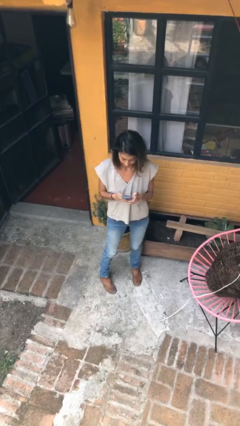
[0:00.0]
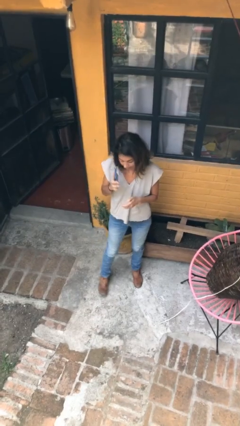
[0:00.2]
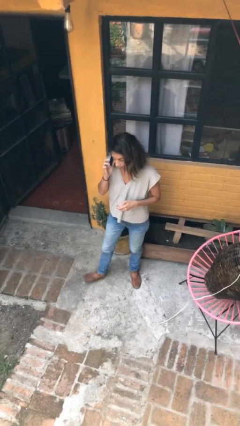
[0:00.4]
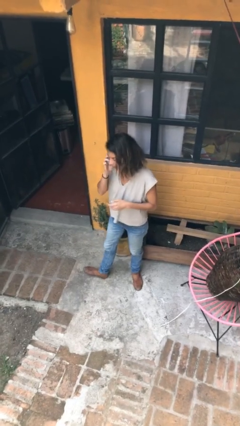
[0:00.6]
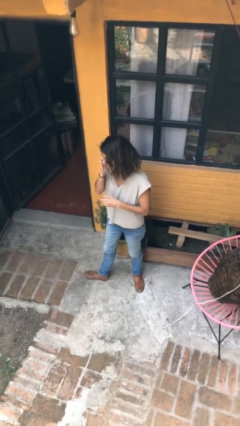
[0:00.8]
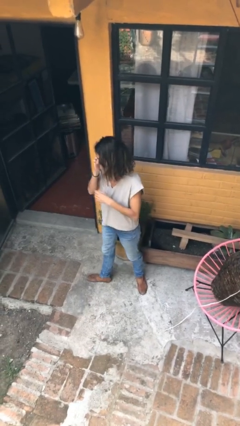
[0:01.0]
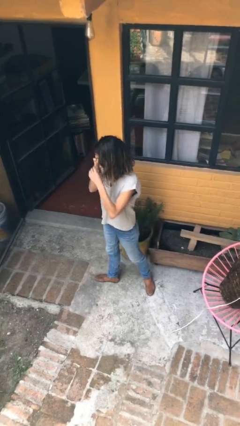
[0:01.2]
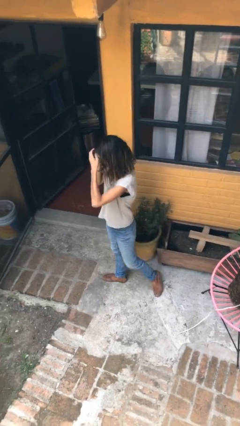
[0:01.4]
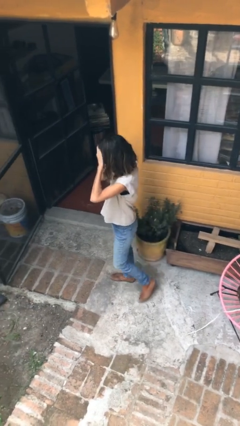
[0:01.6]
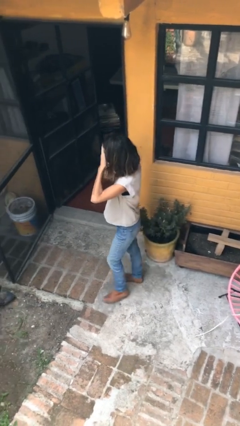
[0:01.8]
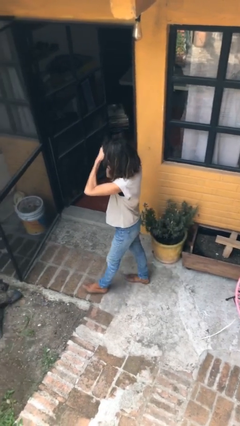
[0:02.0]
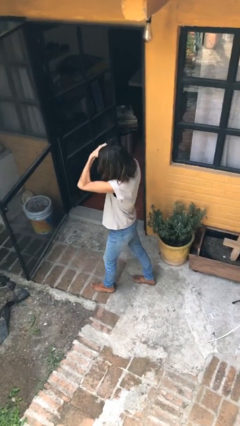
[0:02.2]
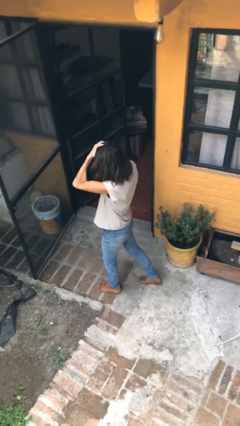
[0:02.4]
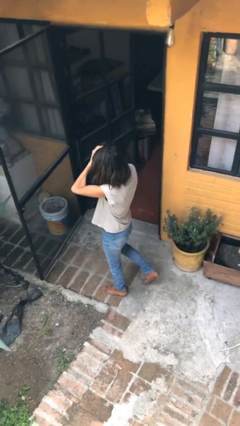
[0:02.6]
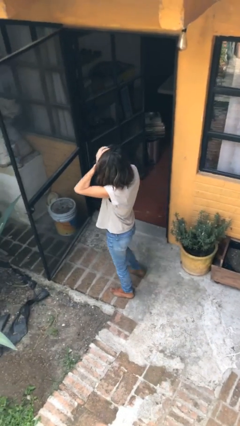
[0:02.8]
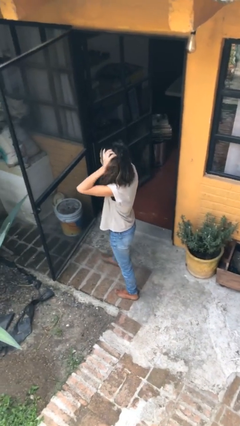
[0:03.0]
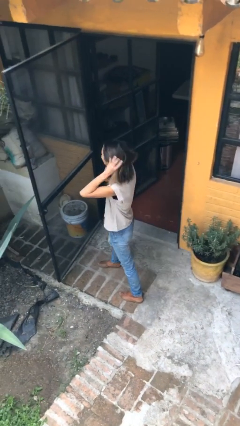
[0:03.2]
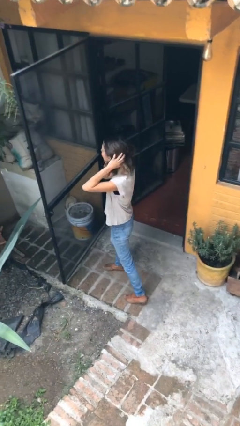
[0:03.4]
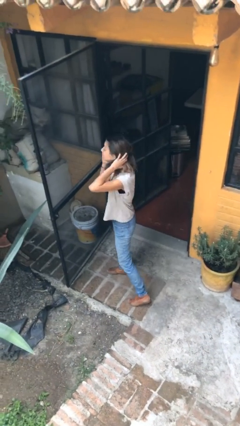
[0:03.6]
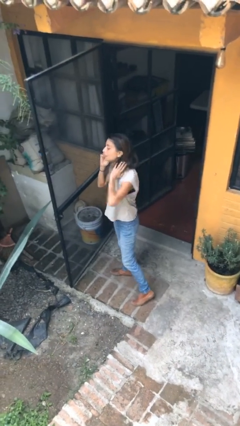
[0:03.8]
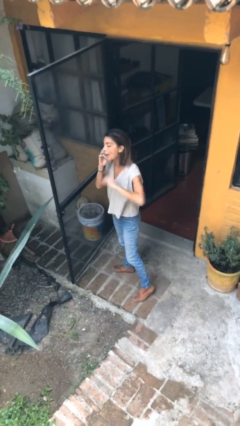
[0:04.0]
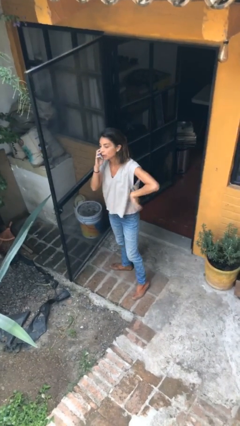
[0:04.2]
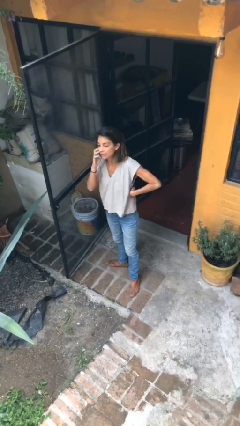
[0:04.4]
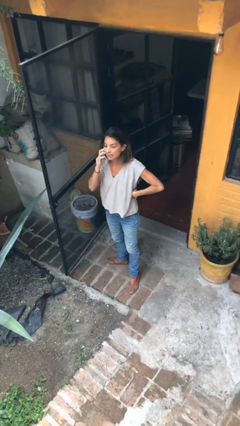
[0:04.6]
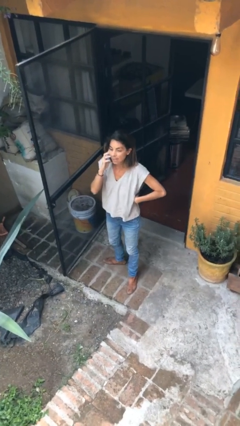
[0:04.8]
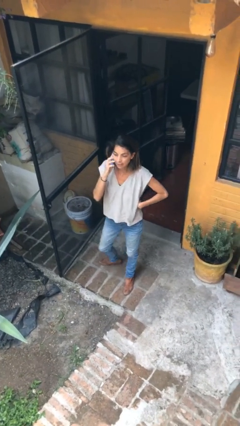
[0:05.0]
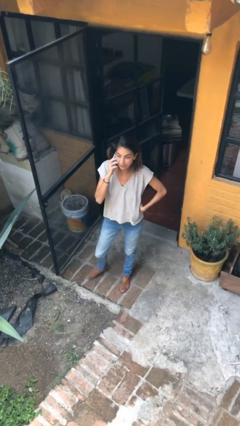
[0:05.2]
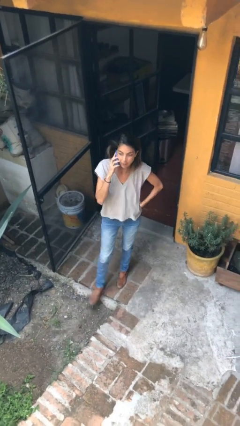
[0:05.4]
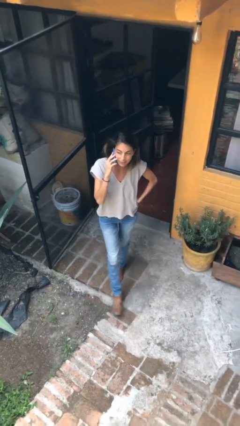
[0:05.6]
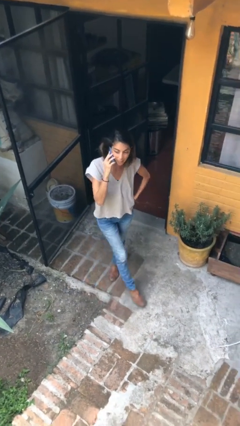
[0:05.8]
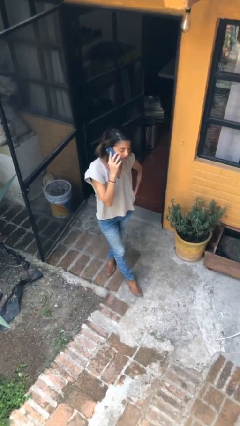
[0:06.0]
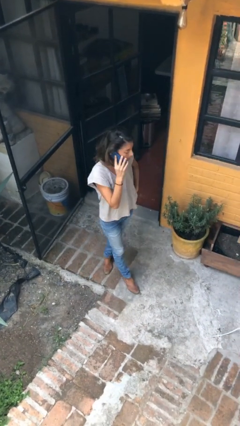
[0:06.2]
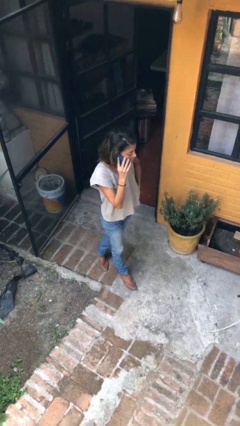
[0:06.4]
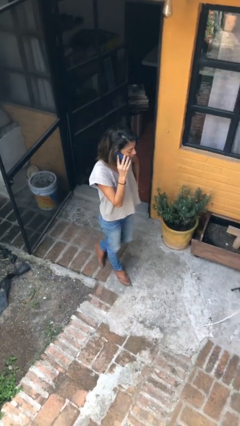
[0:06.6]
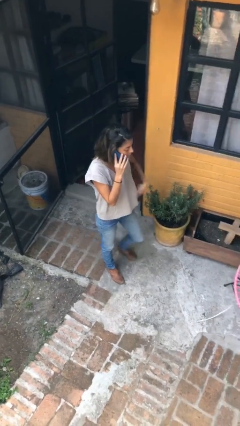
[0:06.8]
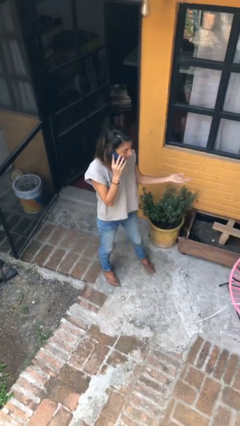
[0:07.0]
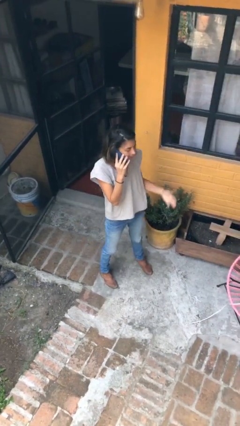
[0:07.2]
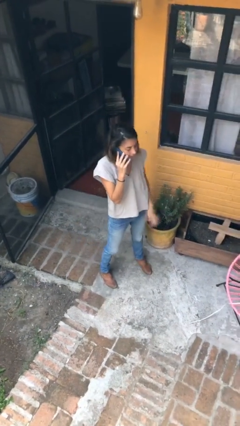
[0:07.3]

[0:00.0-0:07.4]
person talks on phone

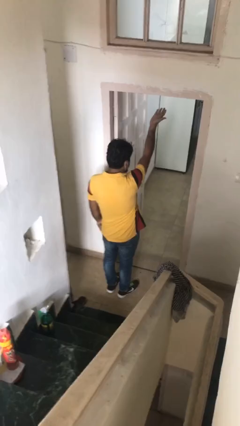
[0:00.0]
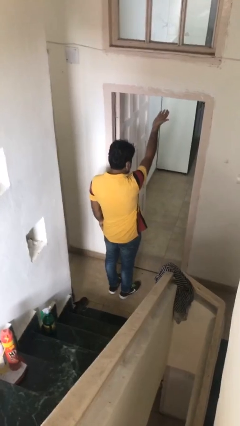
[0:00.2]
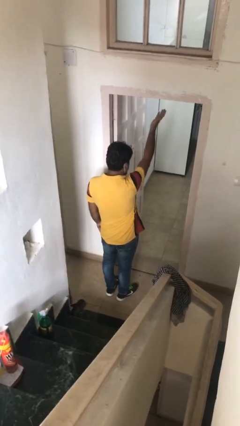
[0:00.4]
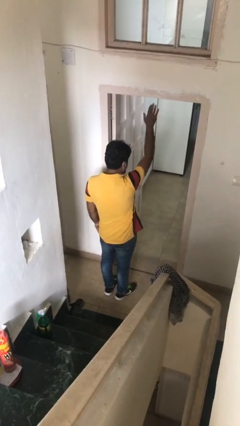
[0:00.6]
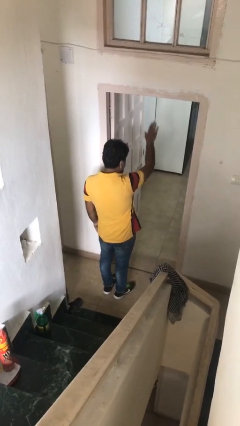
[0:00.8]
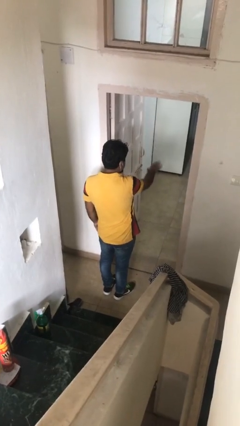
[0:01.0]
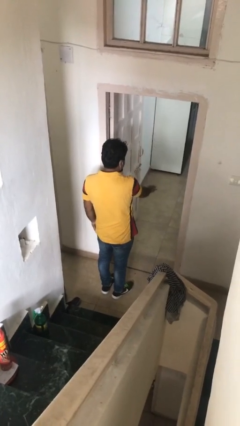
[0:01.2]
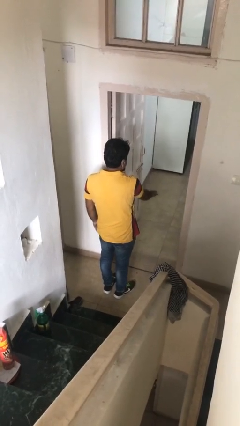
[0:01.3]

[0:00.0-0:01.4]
person gestures swipe down

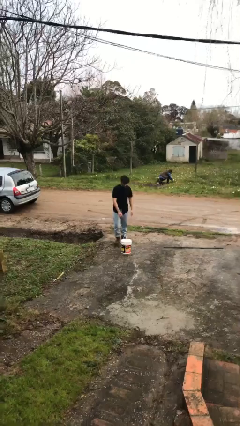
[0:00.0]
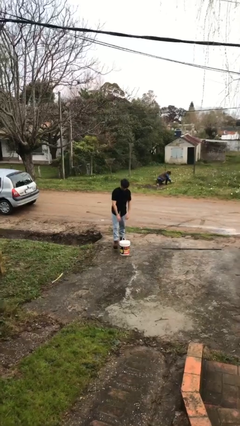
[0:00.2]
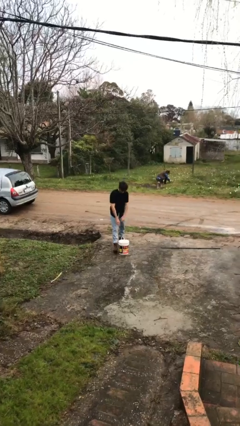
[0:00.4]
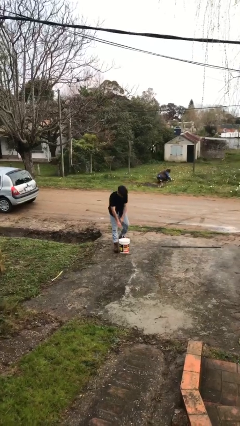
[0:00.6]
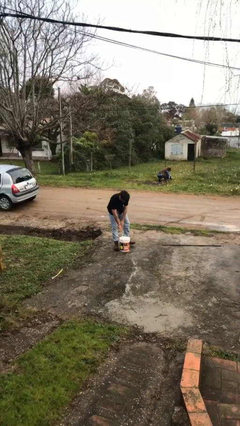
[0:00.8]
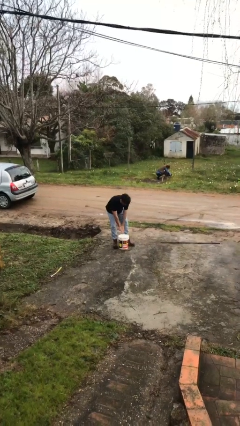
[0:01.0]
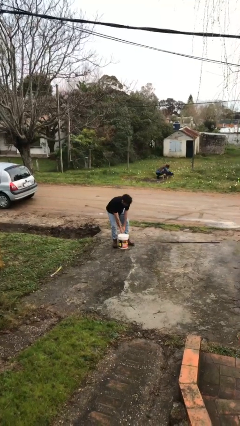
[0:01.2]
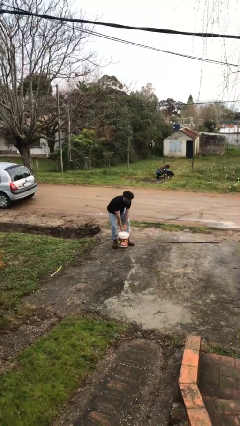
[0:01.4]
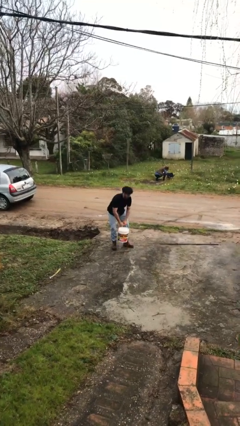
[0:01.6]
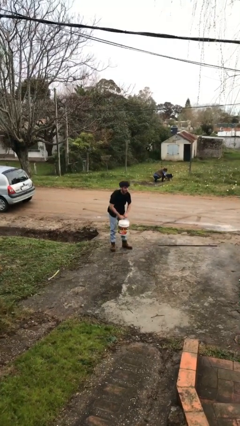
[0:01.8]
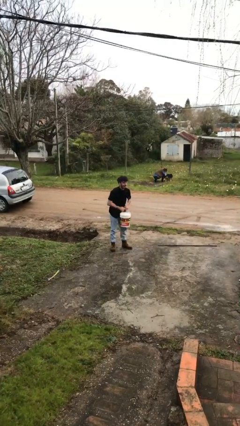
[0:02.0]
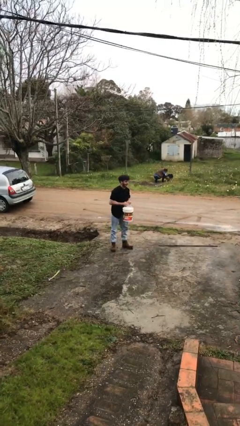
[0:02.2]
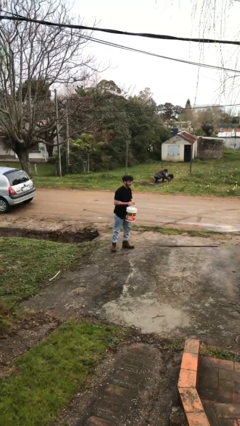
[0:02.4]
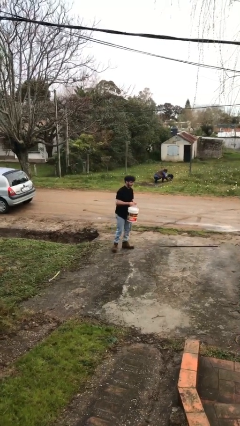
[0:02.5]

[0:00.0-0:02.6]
person picks up object from floor

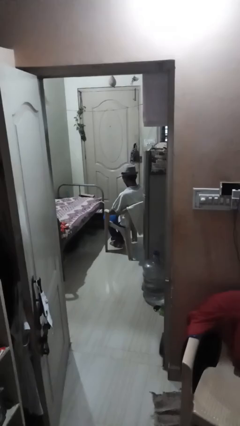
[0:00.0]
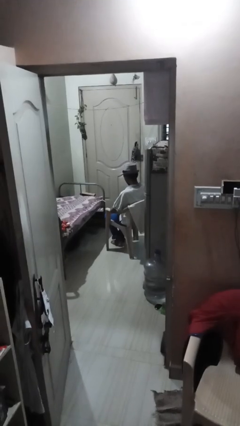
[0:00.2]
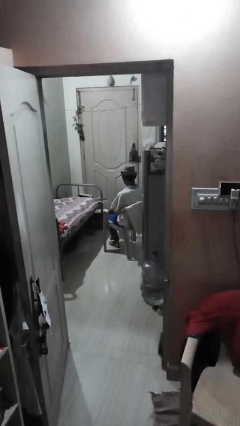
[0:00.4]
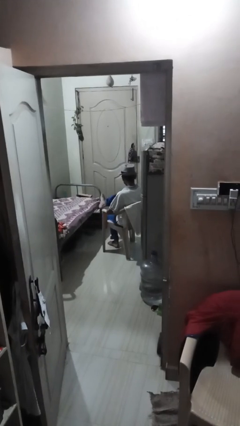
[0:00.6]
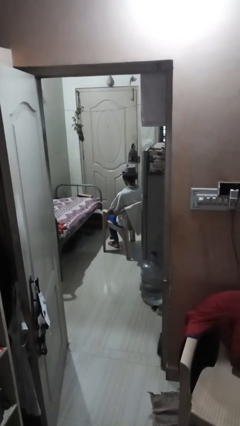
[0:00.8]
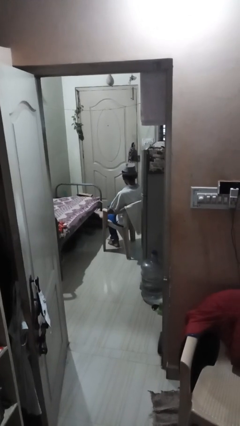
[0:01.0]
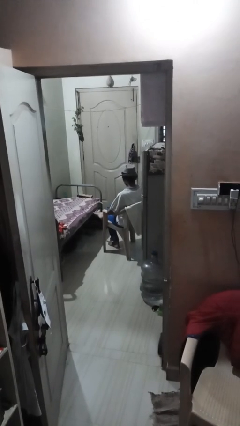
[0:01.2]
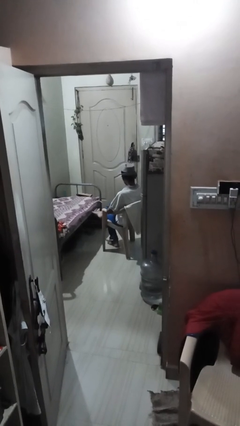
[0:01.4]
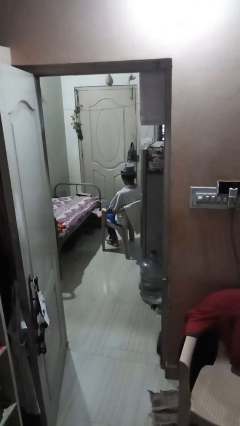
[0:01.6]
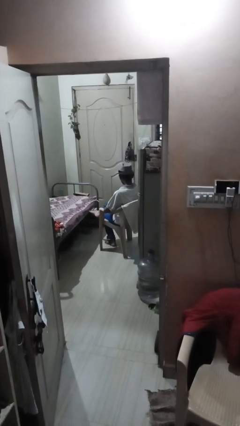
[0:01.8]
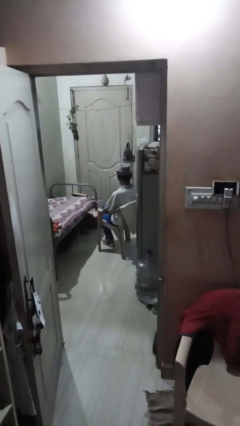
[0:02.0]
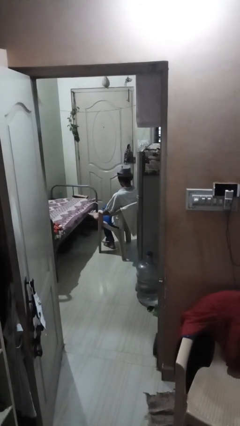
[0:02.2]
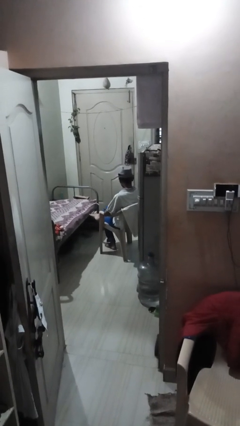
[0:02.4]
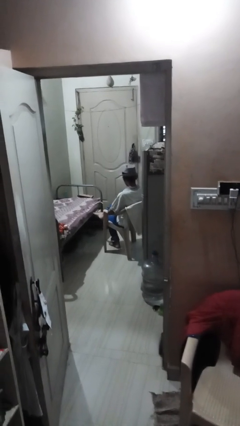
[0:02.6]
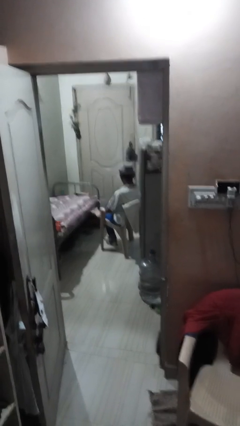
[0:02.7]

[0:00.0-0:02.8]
person crosses legs

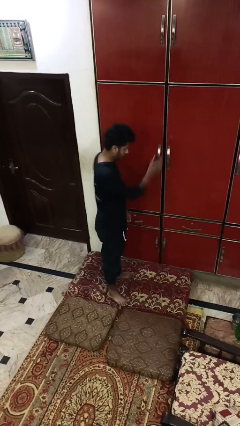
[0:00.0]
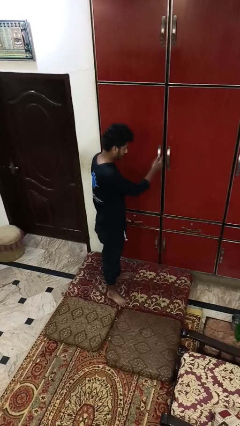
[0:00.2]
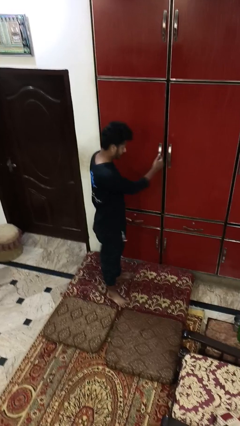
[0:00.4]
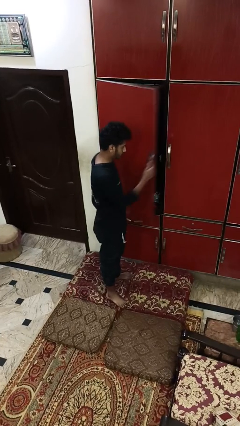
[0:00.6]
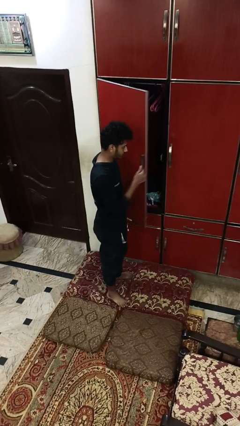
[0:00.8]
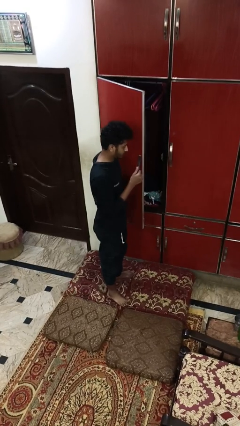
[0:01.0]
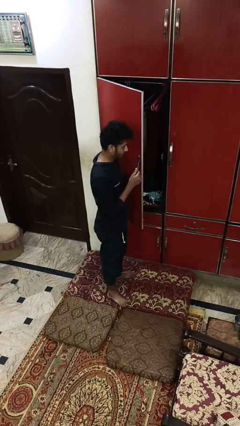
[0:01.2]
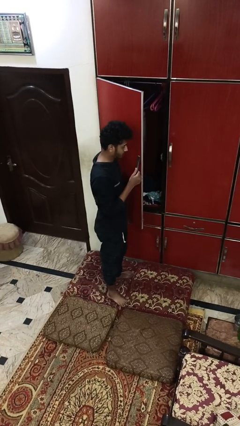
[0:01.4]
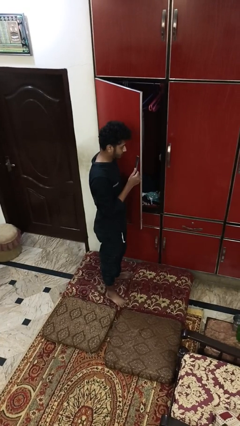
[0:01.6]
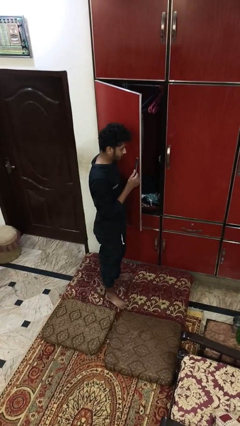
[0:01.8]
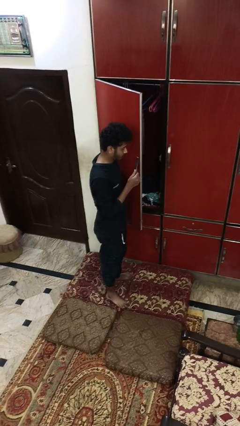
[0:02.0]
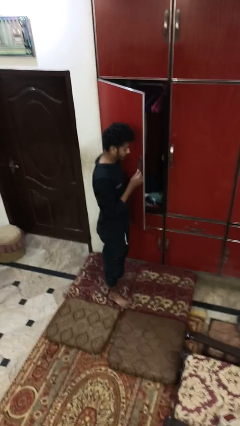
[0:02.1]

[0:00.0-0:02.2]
person opens closet door

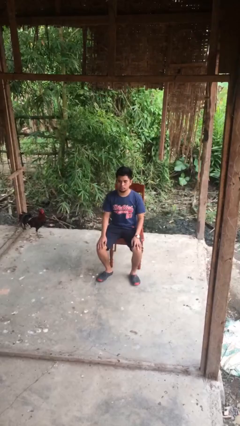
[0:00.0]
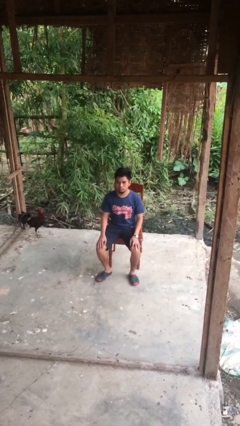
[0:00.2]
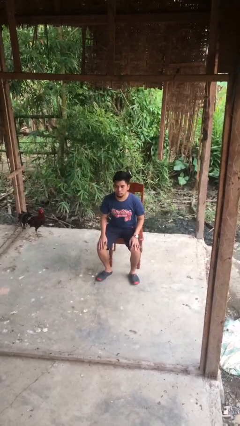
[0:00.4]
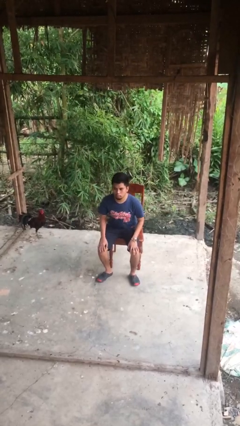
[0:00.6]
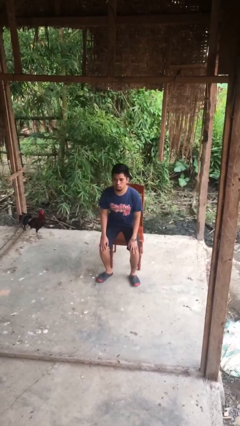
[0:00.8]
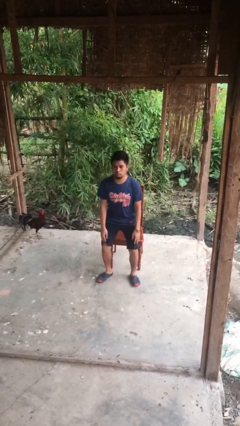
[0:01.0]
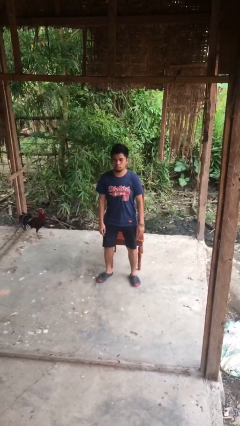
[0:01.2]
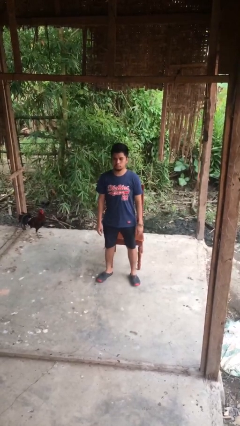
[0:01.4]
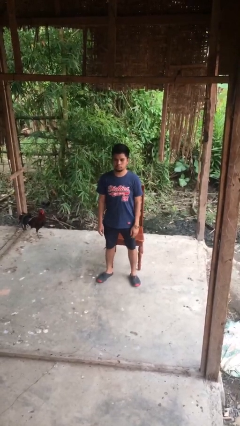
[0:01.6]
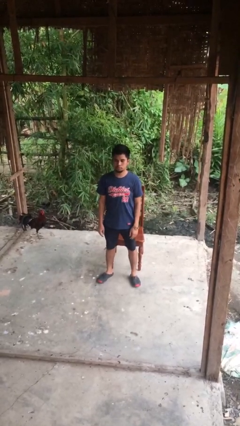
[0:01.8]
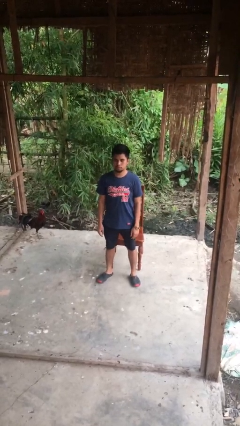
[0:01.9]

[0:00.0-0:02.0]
person stands up
